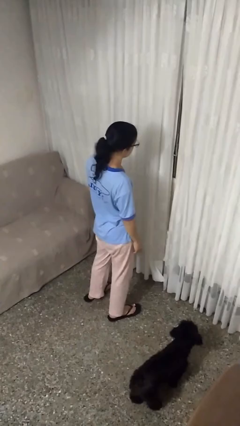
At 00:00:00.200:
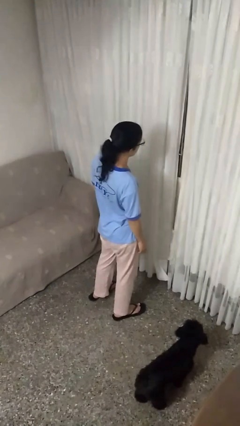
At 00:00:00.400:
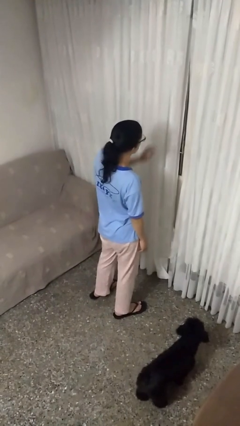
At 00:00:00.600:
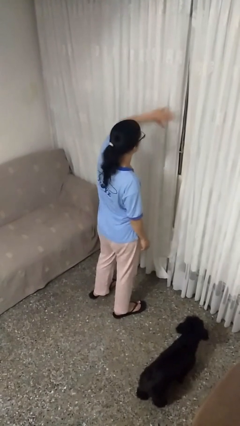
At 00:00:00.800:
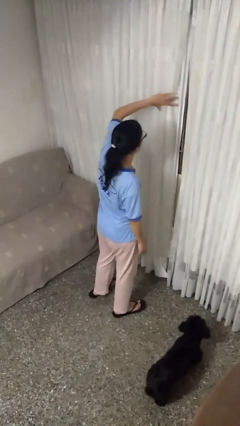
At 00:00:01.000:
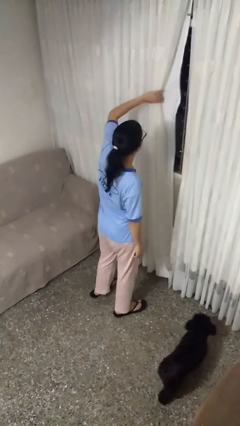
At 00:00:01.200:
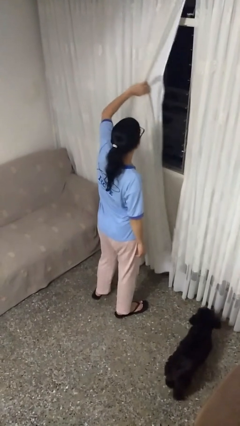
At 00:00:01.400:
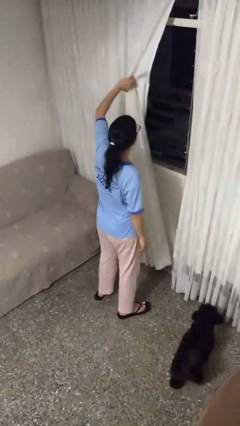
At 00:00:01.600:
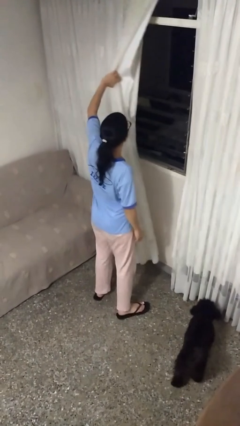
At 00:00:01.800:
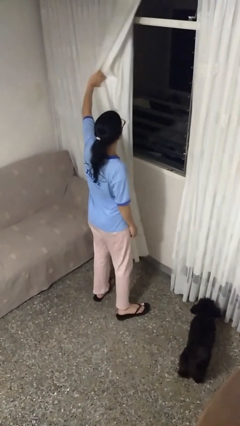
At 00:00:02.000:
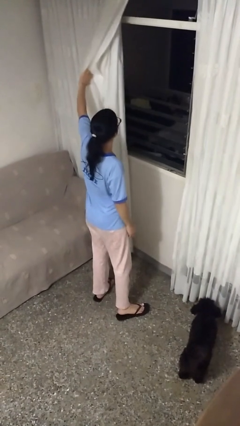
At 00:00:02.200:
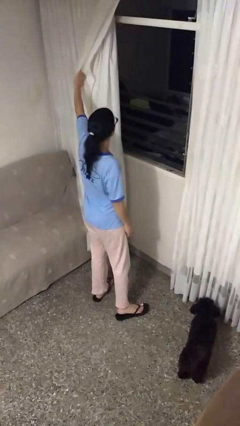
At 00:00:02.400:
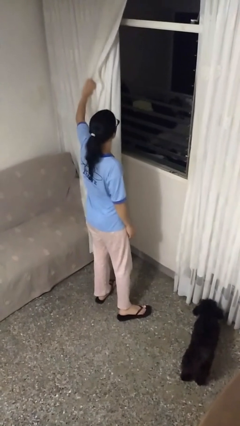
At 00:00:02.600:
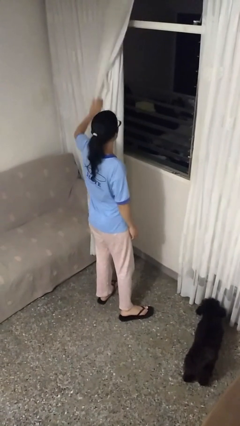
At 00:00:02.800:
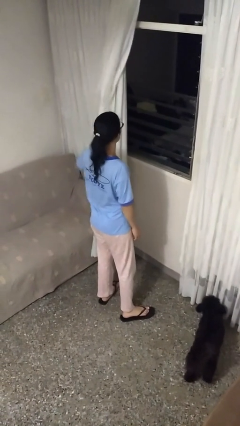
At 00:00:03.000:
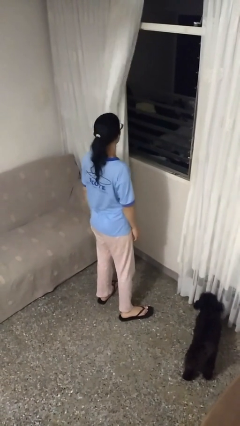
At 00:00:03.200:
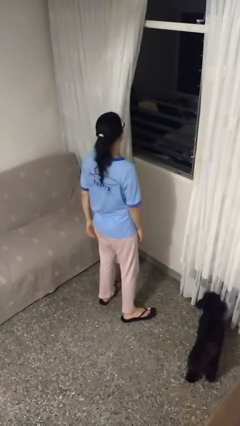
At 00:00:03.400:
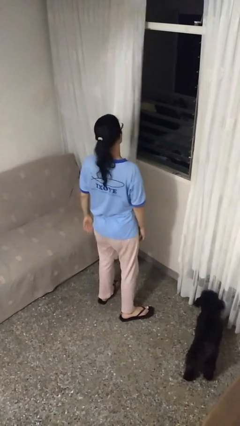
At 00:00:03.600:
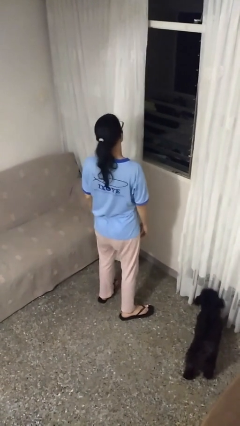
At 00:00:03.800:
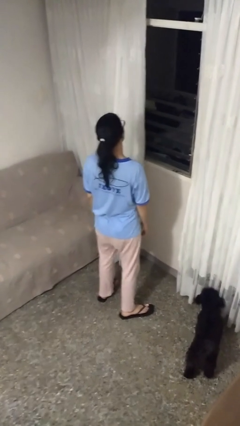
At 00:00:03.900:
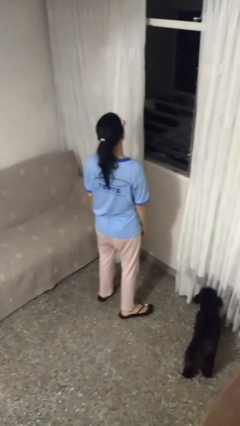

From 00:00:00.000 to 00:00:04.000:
person opens curtains

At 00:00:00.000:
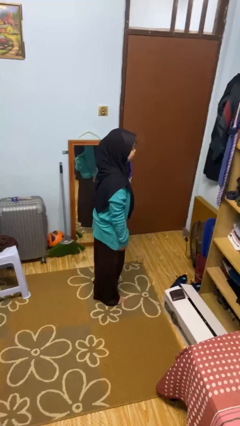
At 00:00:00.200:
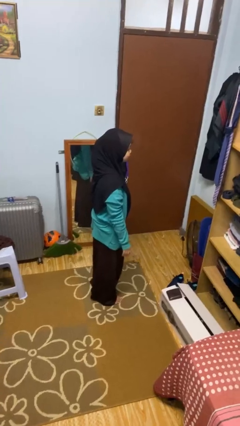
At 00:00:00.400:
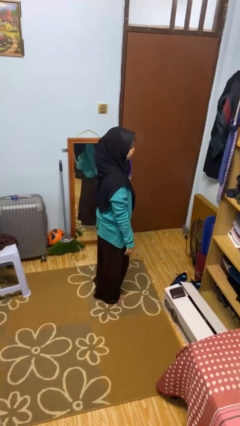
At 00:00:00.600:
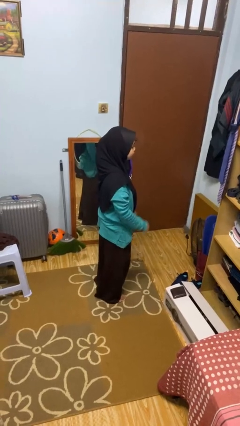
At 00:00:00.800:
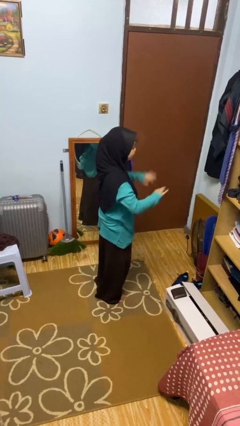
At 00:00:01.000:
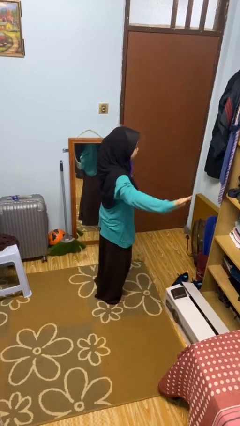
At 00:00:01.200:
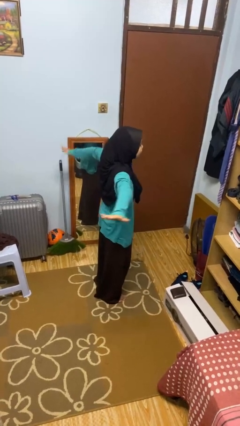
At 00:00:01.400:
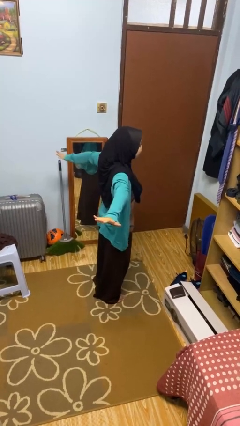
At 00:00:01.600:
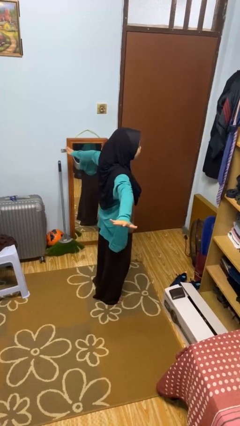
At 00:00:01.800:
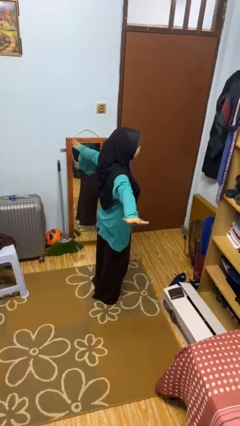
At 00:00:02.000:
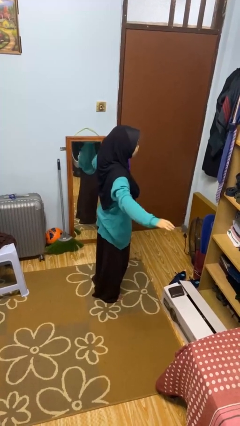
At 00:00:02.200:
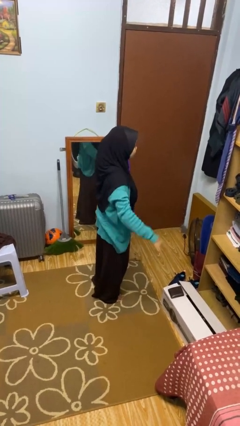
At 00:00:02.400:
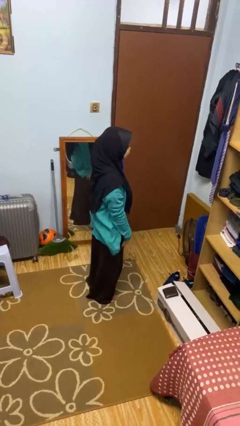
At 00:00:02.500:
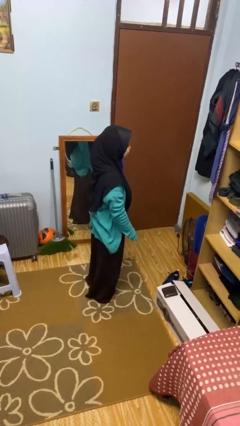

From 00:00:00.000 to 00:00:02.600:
person stretches arms to side

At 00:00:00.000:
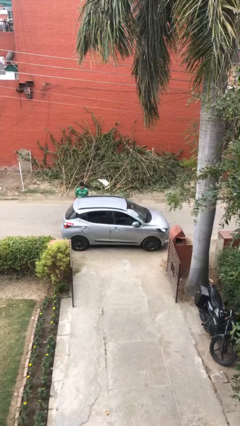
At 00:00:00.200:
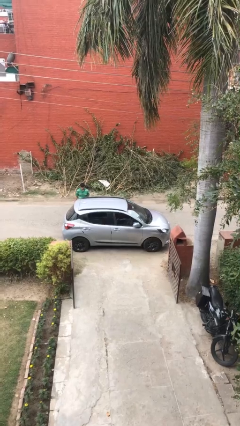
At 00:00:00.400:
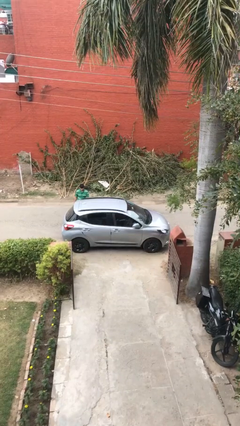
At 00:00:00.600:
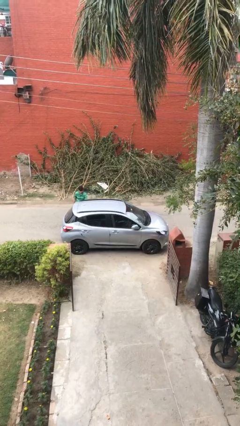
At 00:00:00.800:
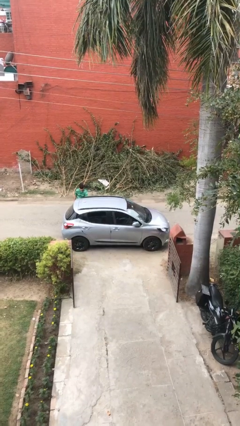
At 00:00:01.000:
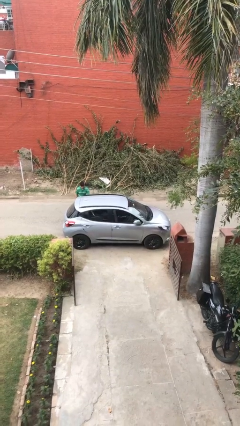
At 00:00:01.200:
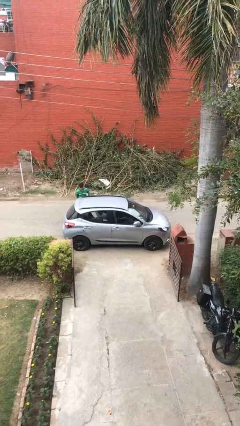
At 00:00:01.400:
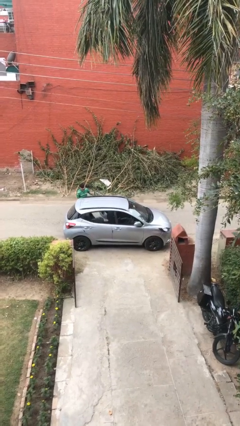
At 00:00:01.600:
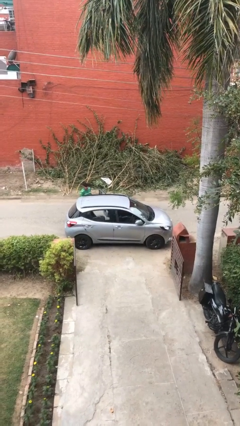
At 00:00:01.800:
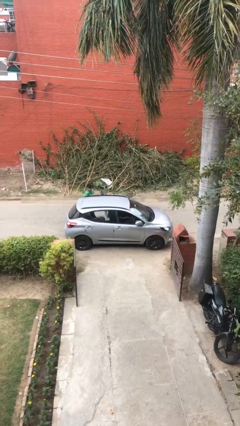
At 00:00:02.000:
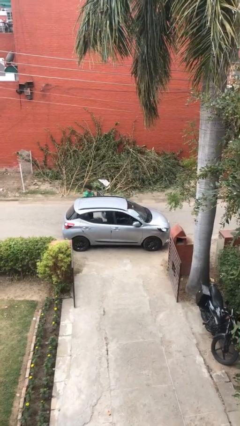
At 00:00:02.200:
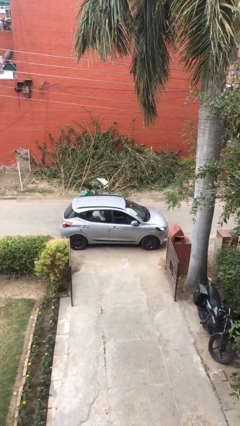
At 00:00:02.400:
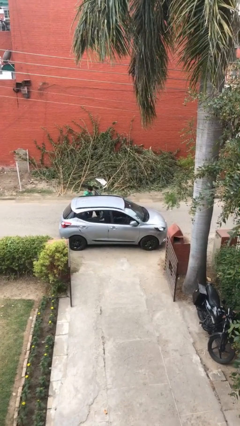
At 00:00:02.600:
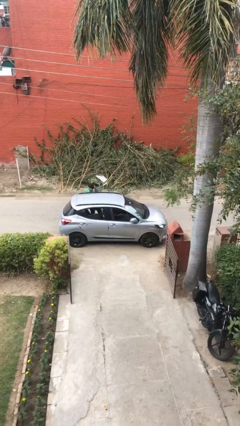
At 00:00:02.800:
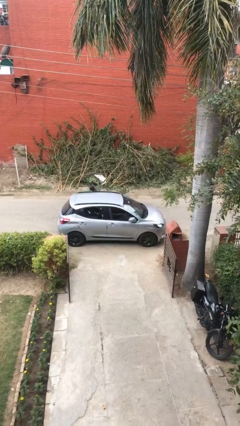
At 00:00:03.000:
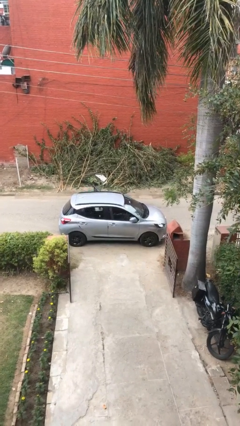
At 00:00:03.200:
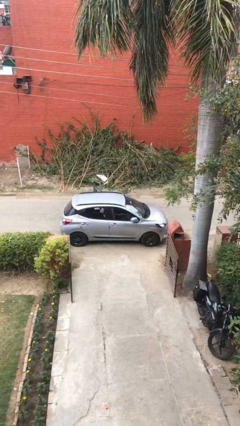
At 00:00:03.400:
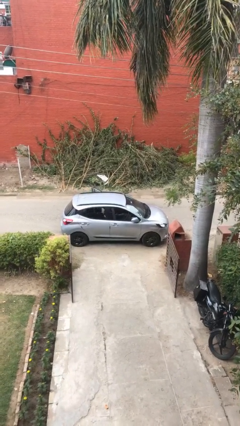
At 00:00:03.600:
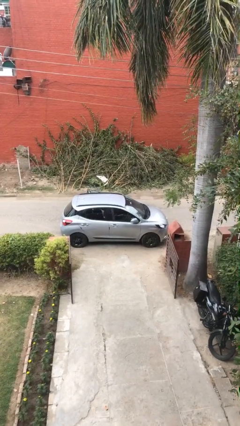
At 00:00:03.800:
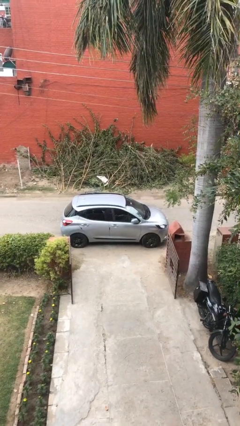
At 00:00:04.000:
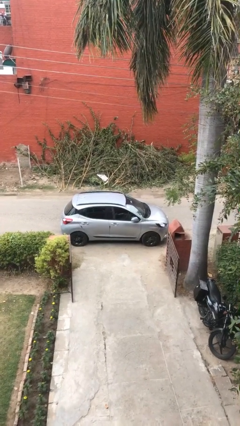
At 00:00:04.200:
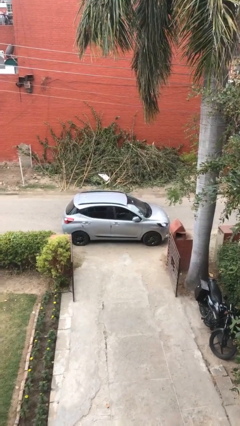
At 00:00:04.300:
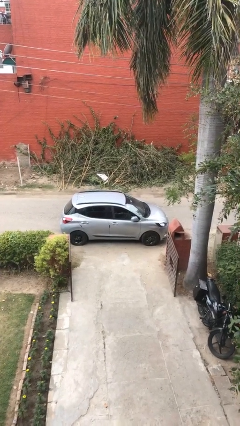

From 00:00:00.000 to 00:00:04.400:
car picks up person

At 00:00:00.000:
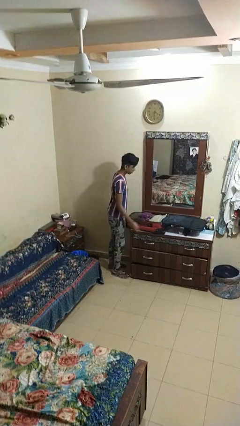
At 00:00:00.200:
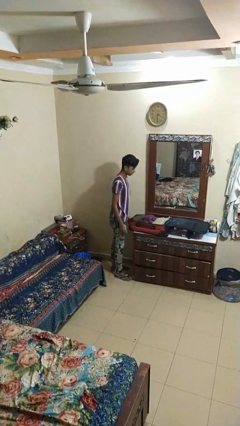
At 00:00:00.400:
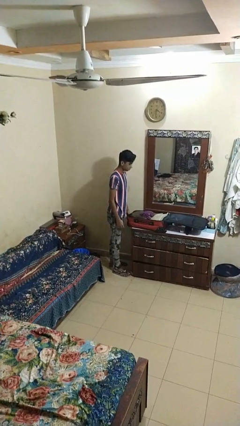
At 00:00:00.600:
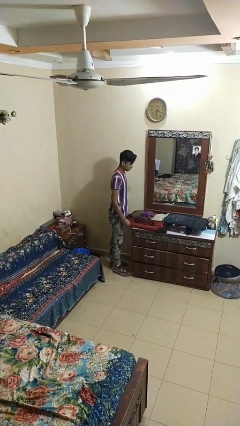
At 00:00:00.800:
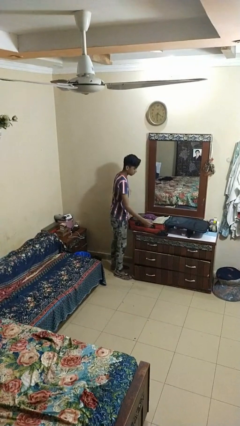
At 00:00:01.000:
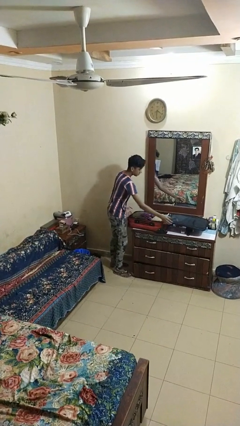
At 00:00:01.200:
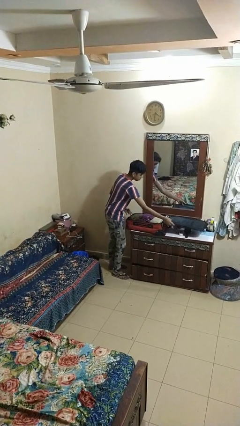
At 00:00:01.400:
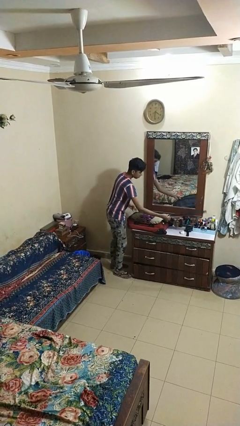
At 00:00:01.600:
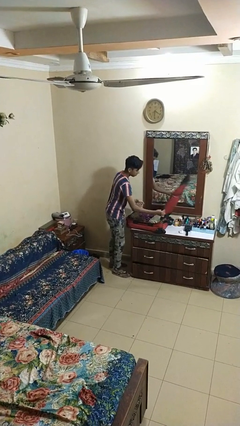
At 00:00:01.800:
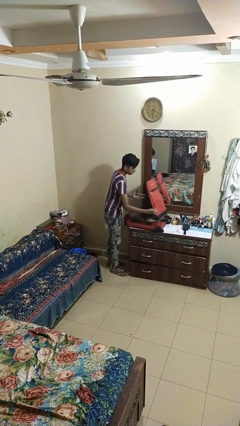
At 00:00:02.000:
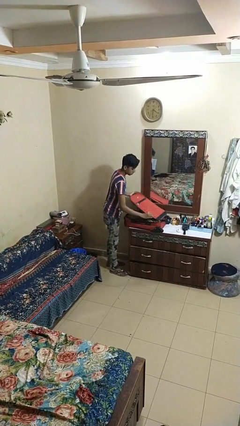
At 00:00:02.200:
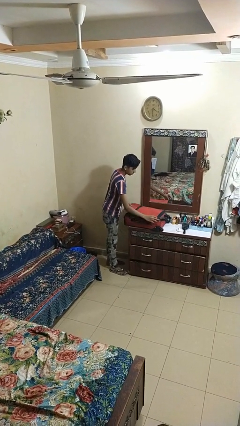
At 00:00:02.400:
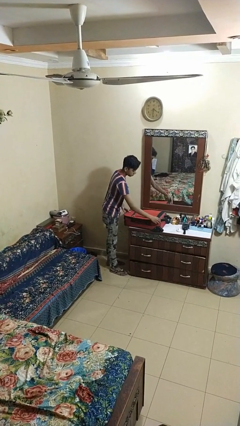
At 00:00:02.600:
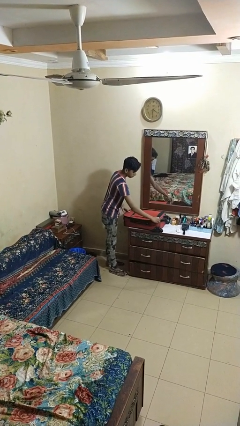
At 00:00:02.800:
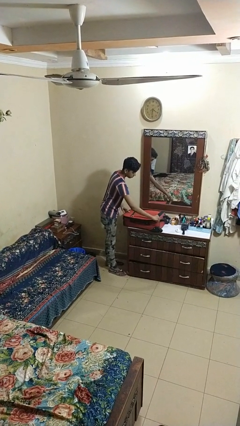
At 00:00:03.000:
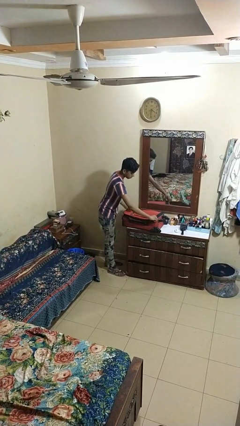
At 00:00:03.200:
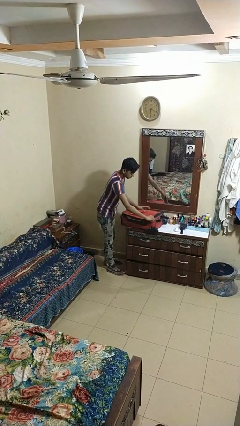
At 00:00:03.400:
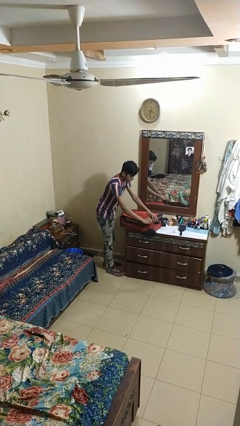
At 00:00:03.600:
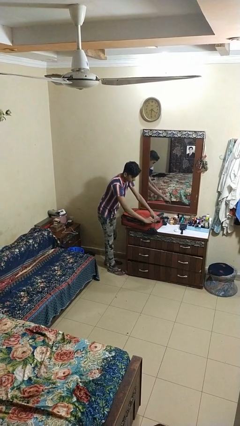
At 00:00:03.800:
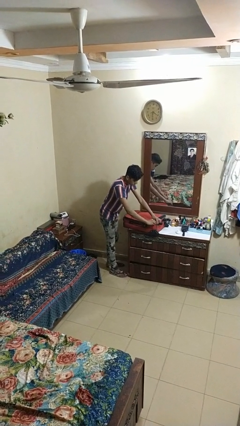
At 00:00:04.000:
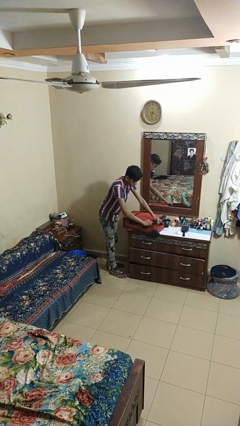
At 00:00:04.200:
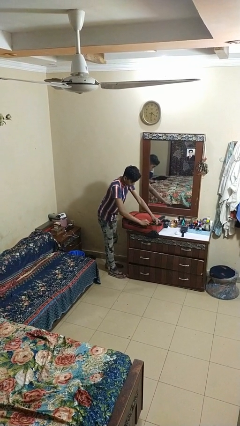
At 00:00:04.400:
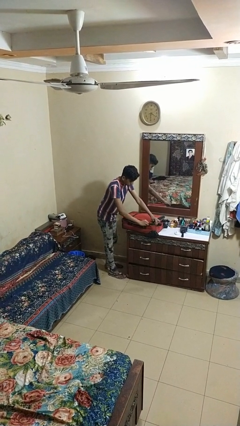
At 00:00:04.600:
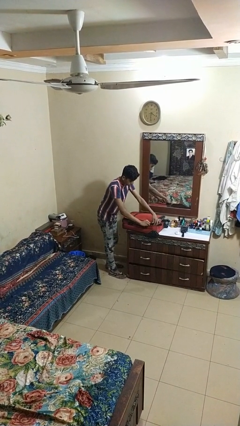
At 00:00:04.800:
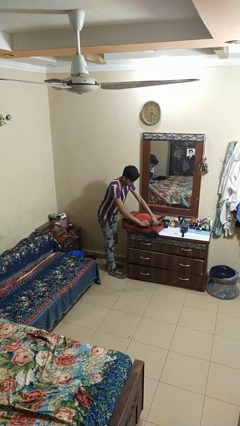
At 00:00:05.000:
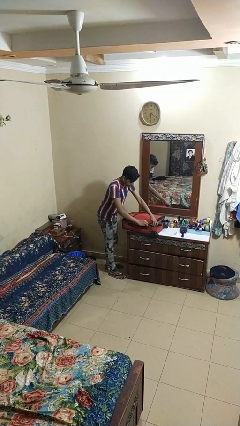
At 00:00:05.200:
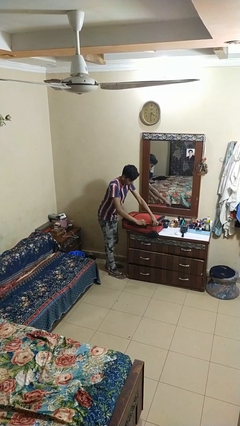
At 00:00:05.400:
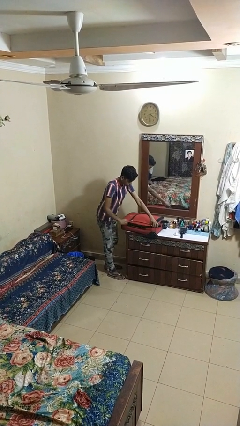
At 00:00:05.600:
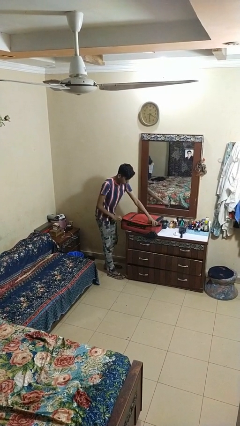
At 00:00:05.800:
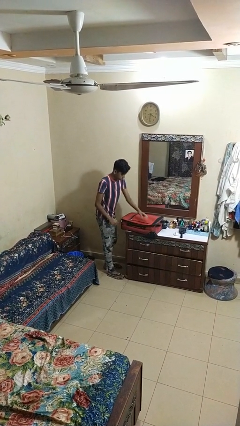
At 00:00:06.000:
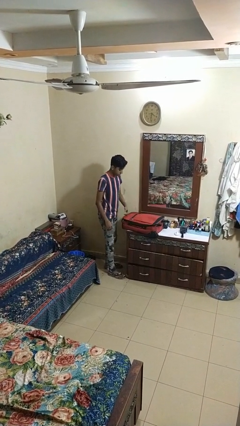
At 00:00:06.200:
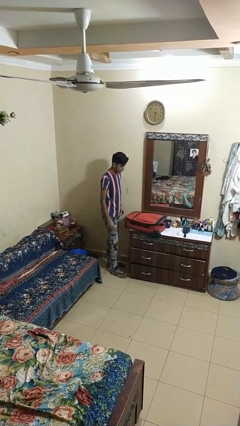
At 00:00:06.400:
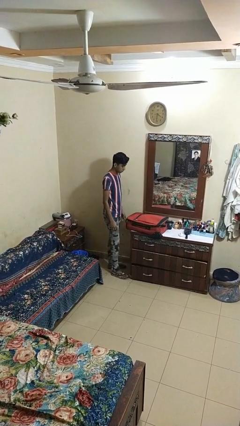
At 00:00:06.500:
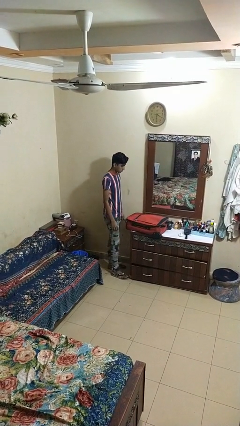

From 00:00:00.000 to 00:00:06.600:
person closes suitcase
